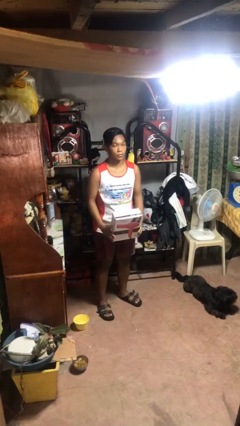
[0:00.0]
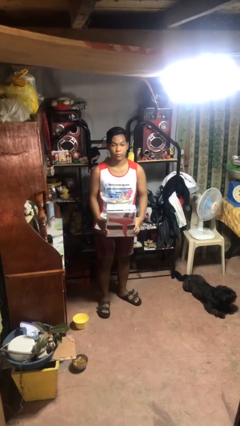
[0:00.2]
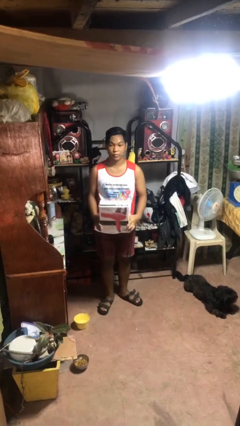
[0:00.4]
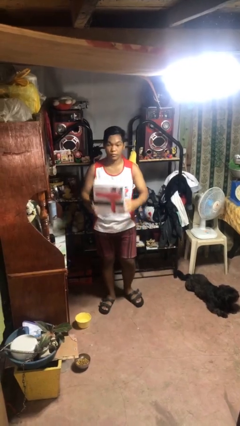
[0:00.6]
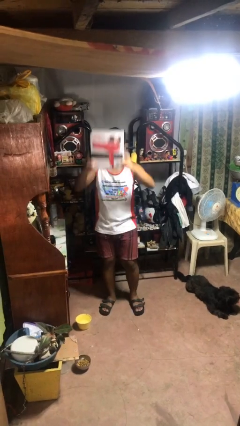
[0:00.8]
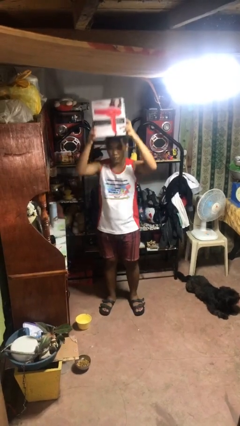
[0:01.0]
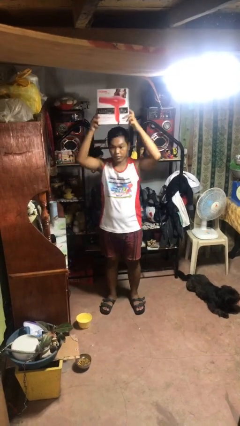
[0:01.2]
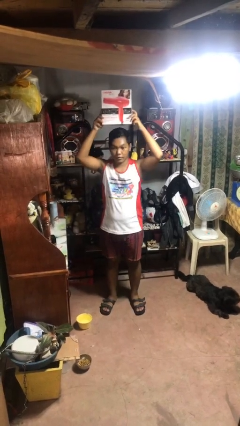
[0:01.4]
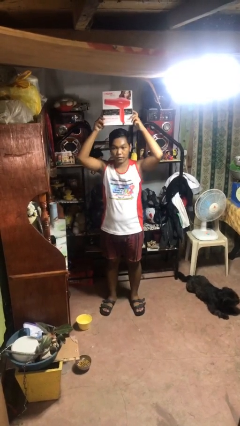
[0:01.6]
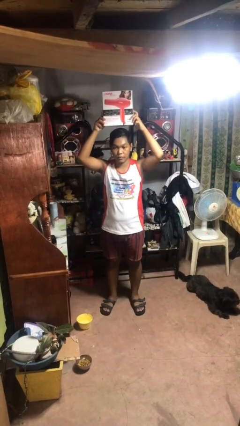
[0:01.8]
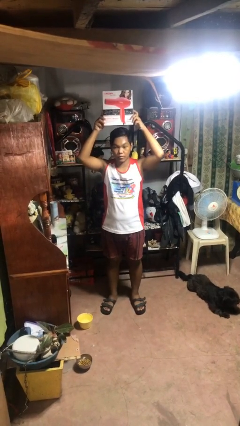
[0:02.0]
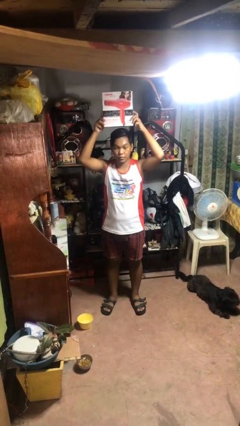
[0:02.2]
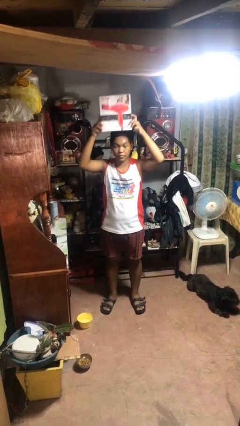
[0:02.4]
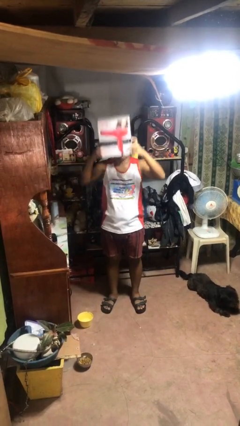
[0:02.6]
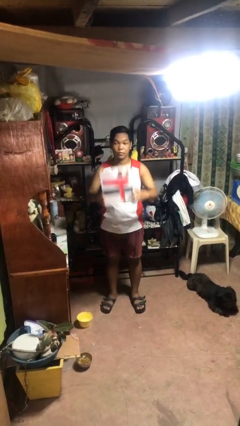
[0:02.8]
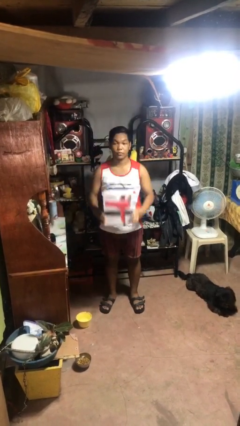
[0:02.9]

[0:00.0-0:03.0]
person holds object above head

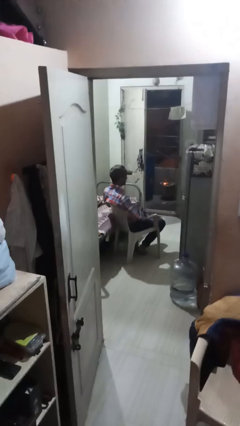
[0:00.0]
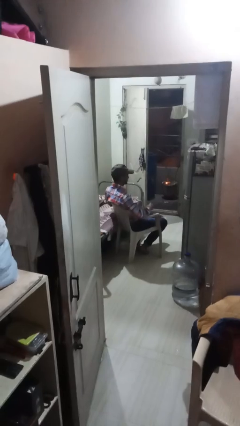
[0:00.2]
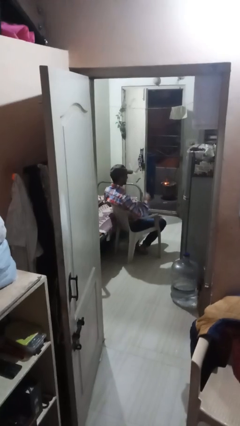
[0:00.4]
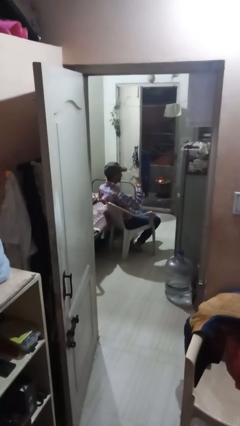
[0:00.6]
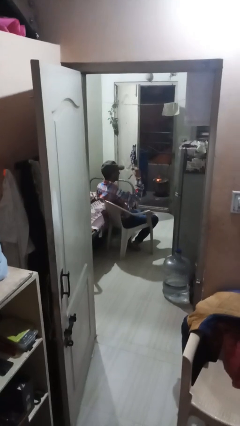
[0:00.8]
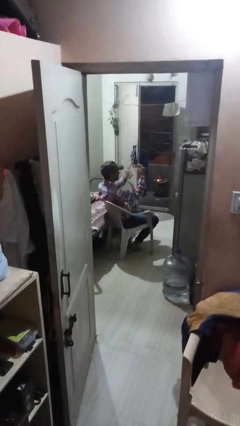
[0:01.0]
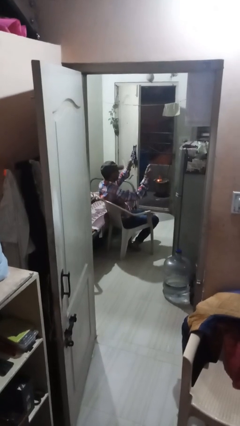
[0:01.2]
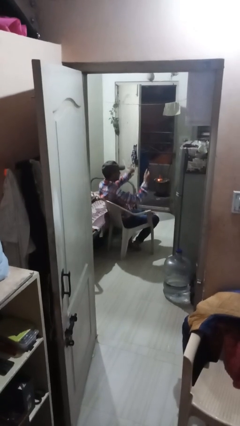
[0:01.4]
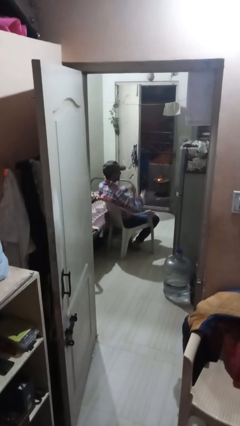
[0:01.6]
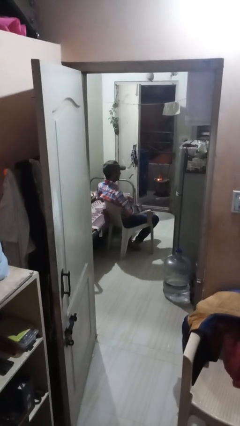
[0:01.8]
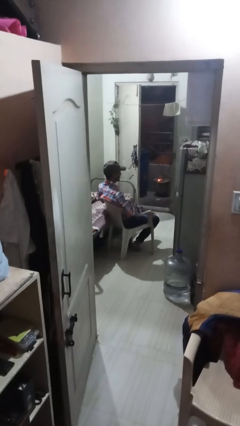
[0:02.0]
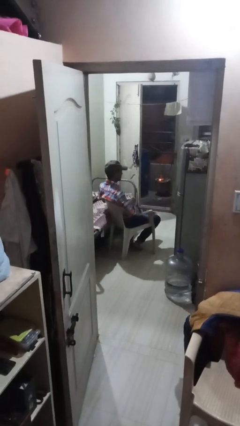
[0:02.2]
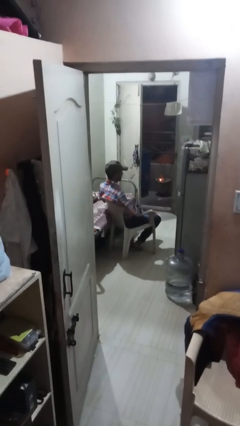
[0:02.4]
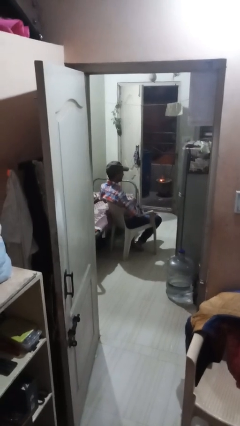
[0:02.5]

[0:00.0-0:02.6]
person snaps fingers

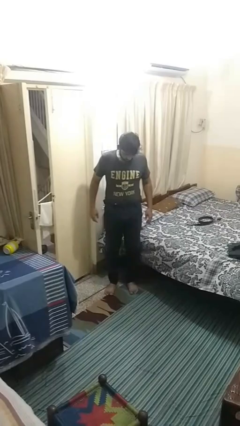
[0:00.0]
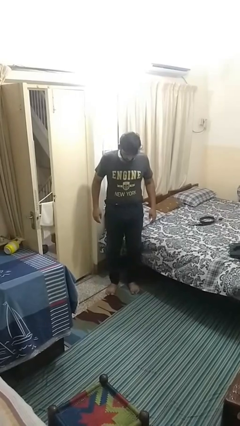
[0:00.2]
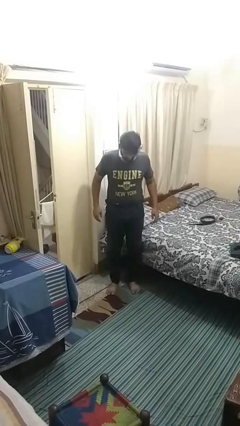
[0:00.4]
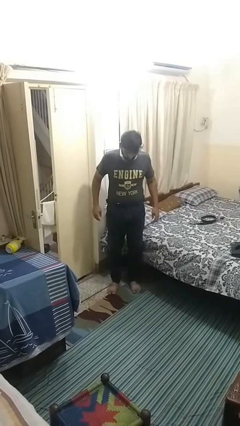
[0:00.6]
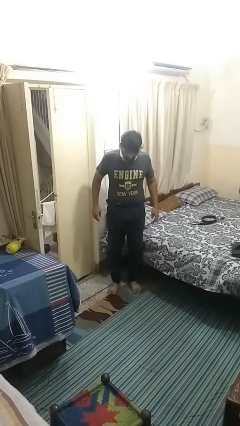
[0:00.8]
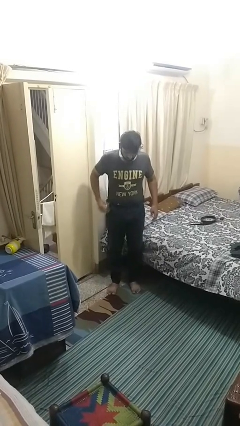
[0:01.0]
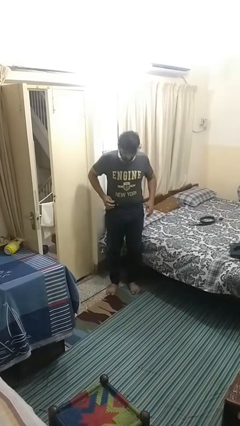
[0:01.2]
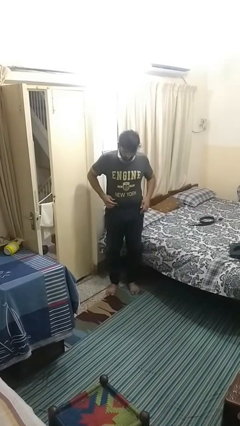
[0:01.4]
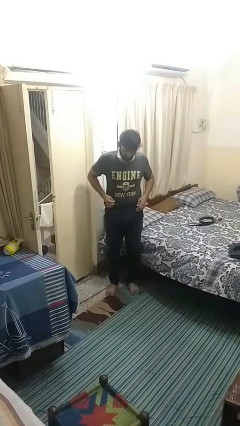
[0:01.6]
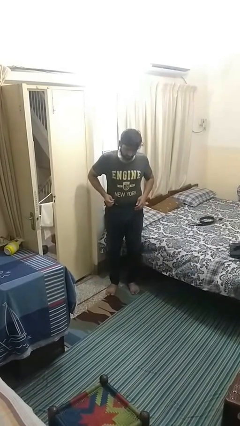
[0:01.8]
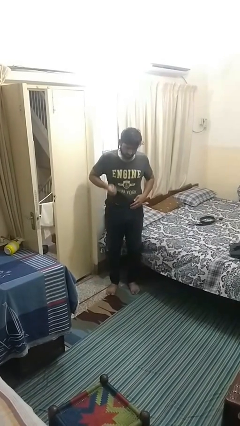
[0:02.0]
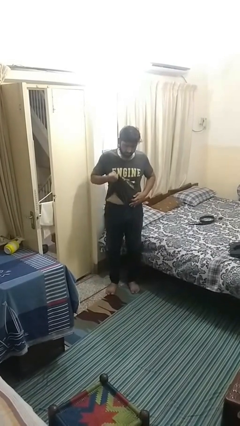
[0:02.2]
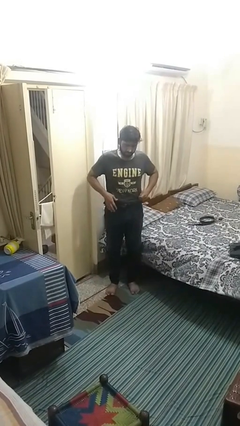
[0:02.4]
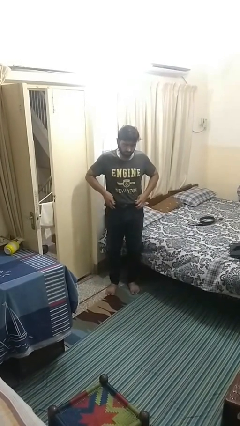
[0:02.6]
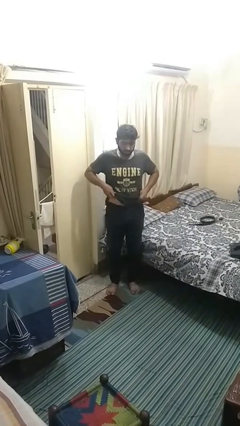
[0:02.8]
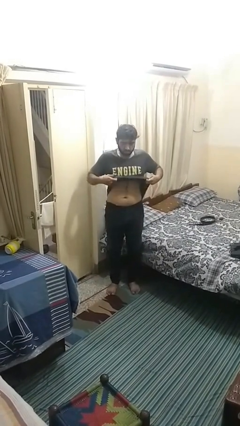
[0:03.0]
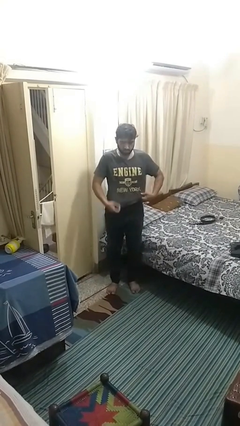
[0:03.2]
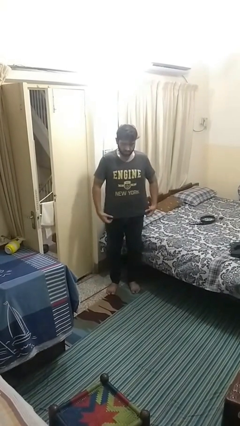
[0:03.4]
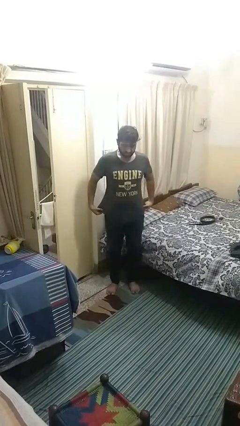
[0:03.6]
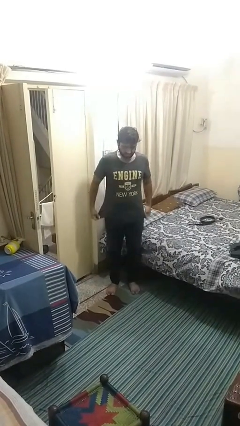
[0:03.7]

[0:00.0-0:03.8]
person untucks shirt

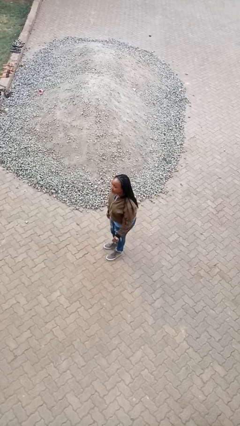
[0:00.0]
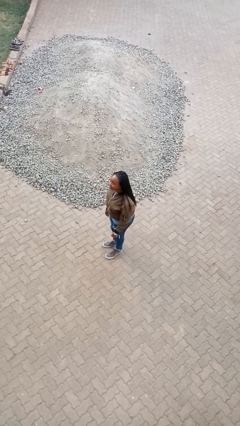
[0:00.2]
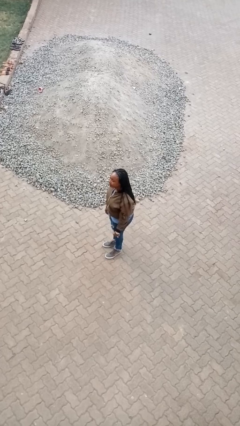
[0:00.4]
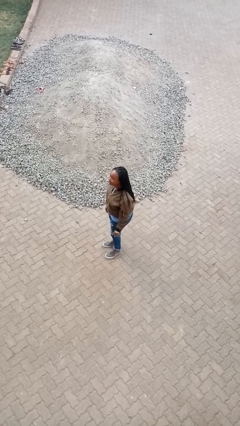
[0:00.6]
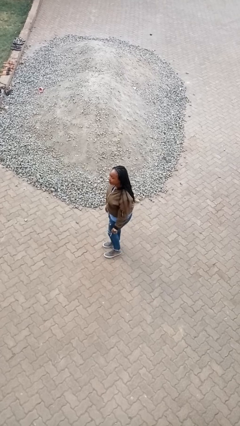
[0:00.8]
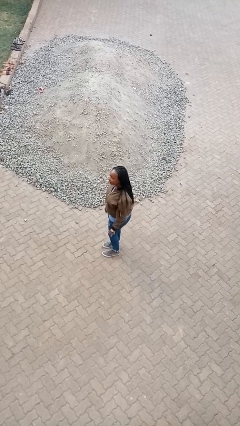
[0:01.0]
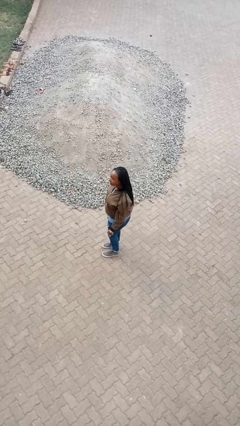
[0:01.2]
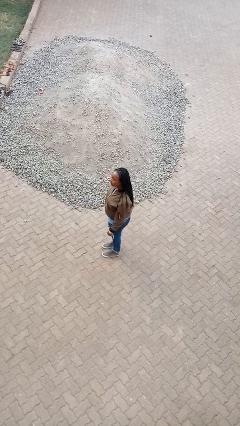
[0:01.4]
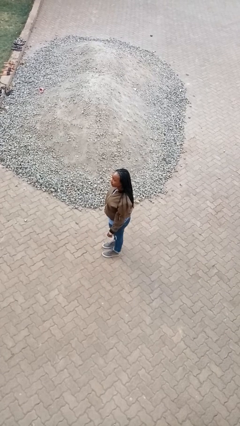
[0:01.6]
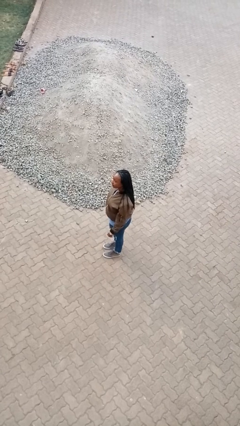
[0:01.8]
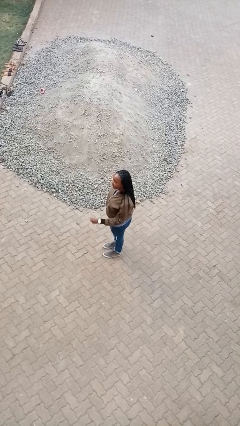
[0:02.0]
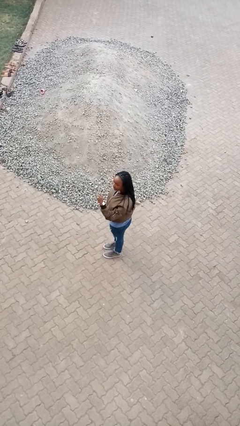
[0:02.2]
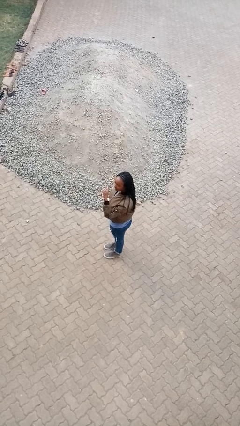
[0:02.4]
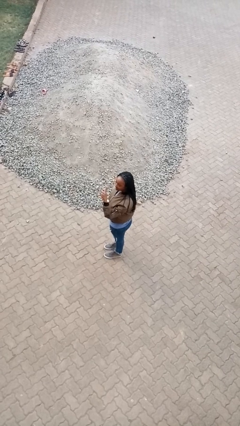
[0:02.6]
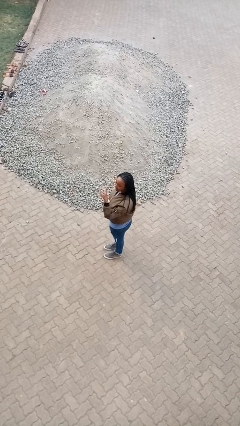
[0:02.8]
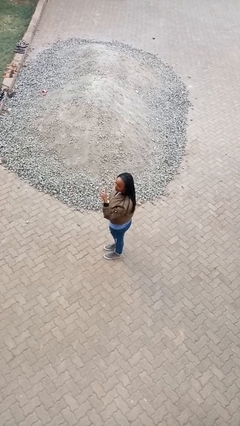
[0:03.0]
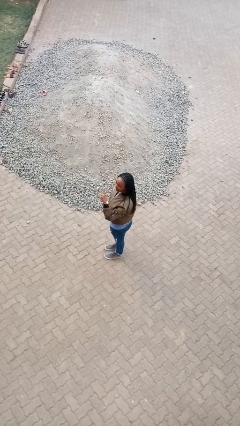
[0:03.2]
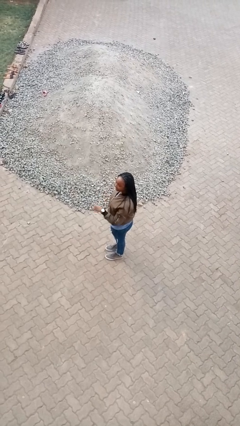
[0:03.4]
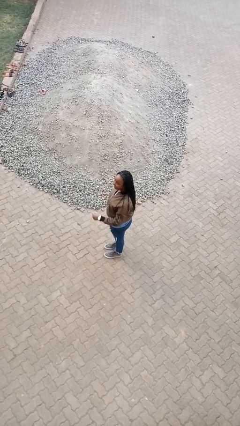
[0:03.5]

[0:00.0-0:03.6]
person gestures number one

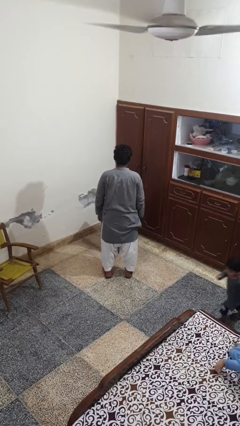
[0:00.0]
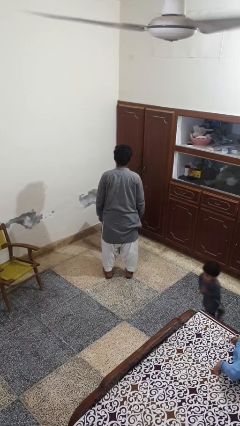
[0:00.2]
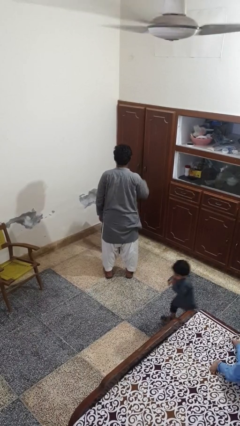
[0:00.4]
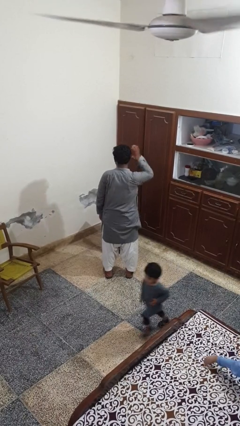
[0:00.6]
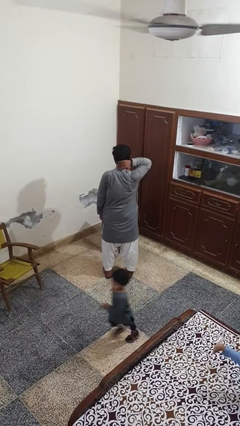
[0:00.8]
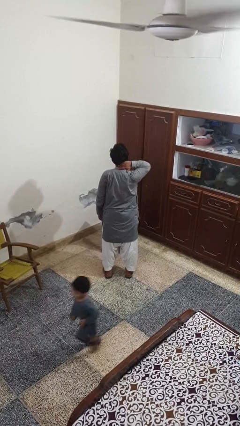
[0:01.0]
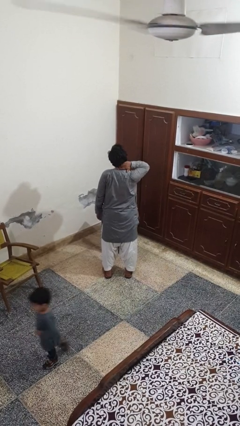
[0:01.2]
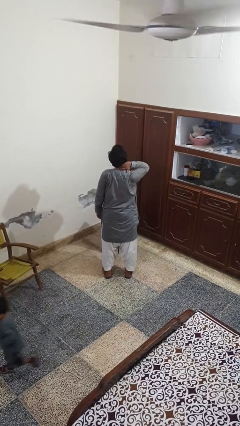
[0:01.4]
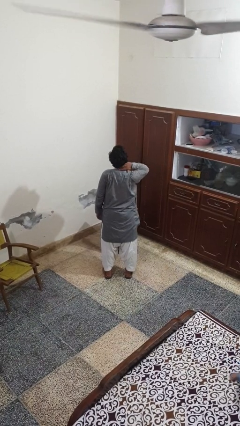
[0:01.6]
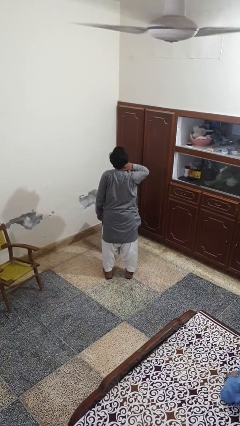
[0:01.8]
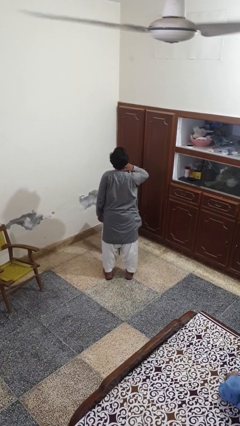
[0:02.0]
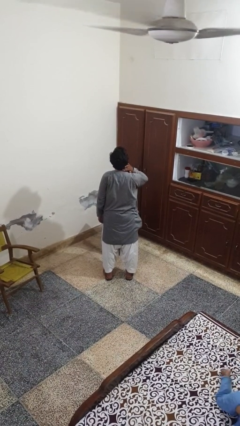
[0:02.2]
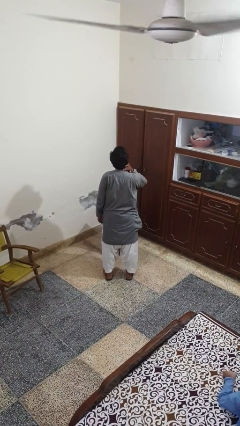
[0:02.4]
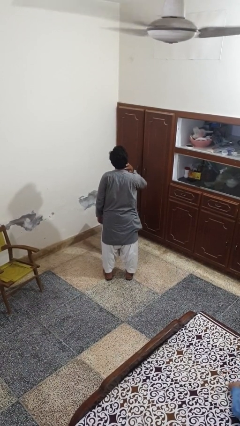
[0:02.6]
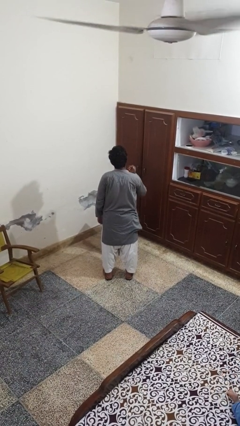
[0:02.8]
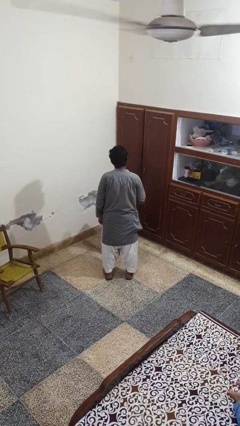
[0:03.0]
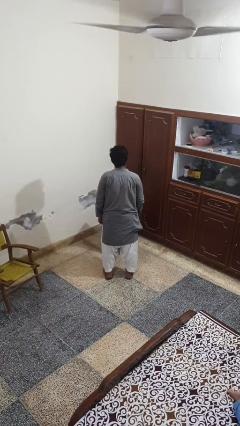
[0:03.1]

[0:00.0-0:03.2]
person rubs neck

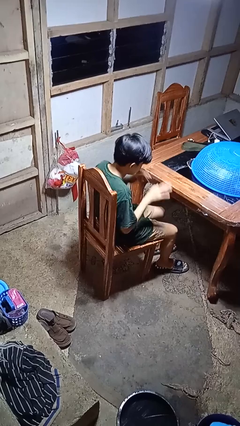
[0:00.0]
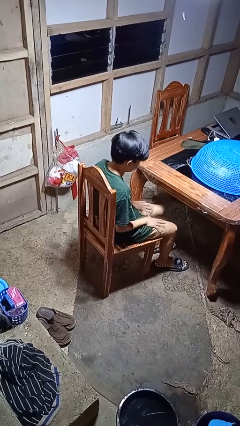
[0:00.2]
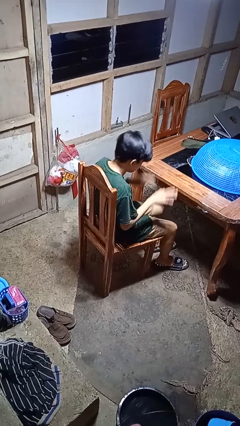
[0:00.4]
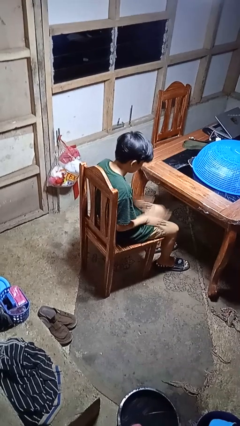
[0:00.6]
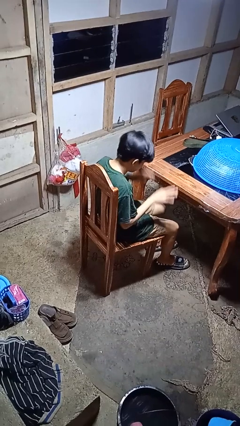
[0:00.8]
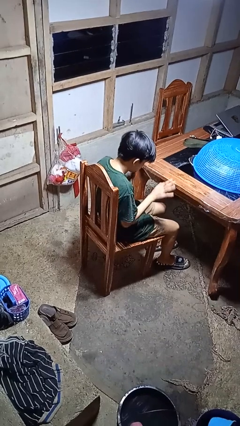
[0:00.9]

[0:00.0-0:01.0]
person slaps hands on thighs

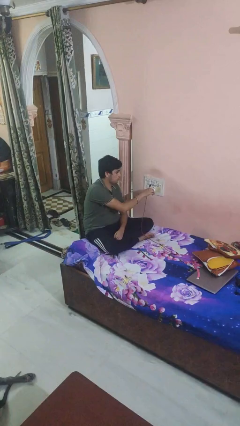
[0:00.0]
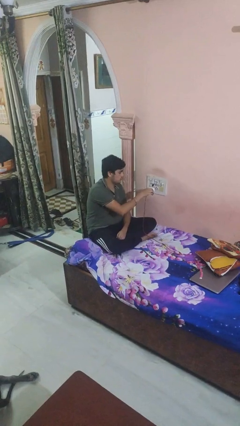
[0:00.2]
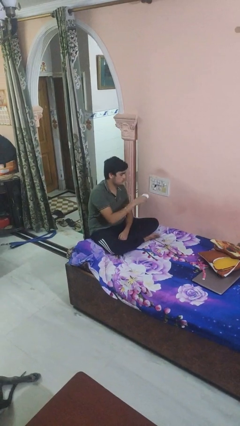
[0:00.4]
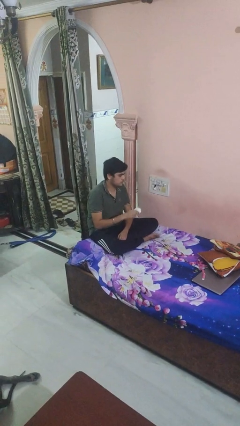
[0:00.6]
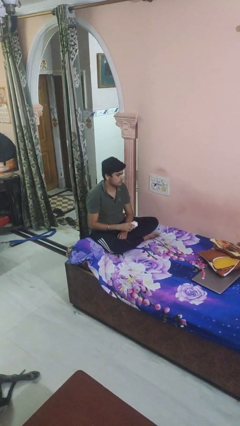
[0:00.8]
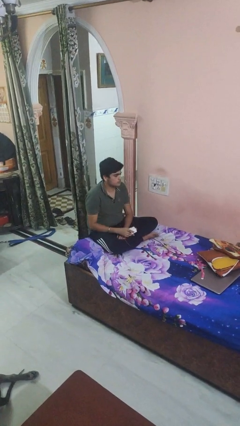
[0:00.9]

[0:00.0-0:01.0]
person unplugs from electrical socket
